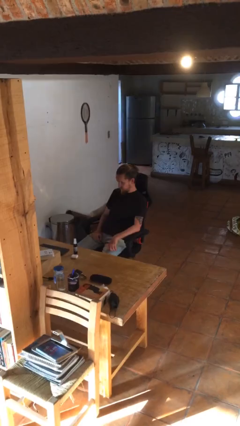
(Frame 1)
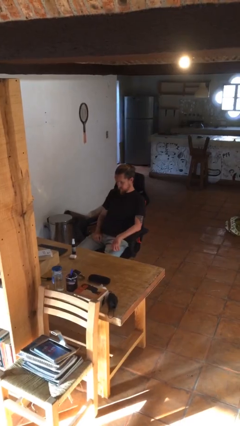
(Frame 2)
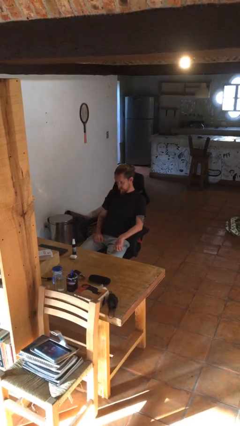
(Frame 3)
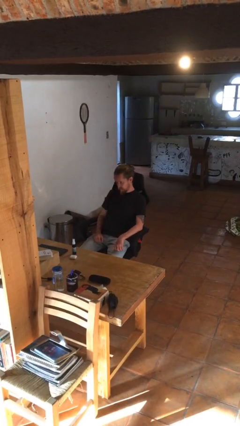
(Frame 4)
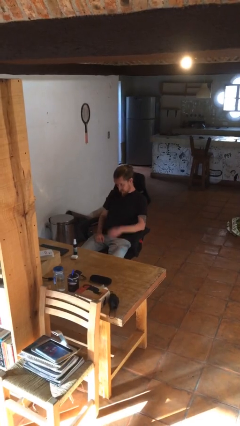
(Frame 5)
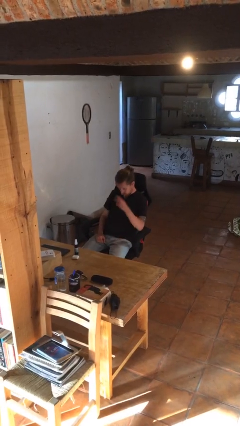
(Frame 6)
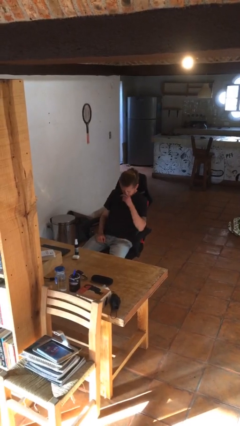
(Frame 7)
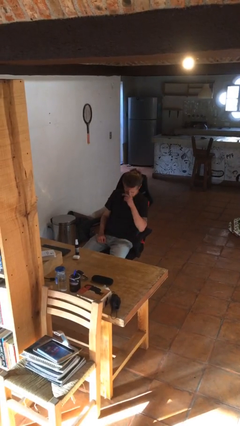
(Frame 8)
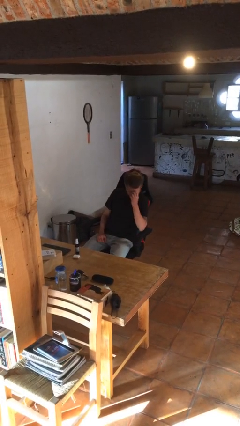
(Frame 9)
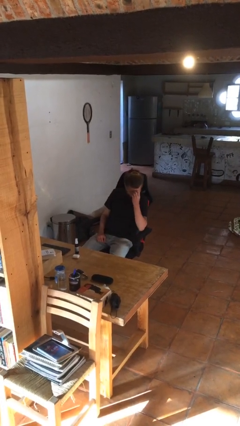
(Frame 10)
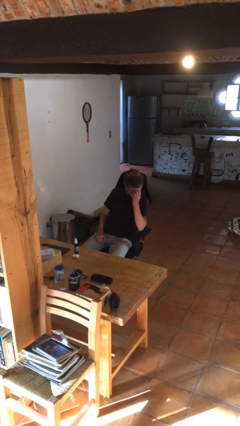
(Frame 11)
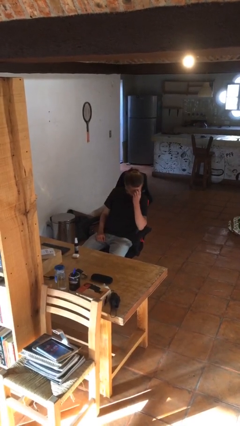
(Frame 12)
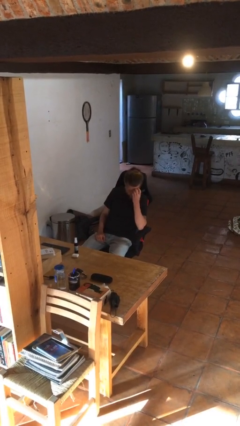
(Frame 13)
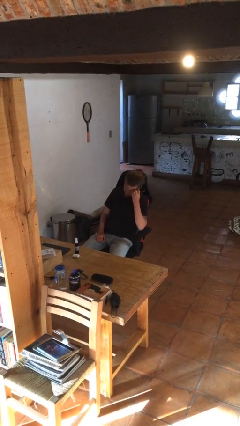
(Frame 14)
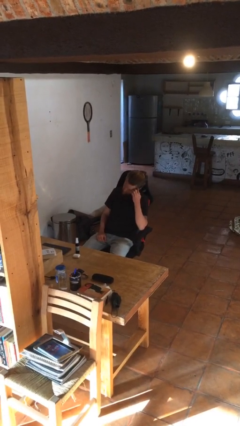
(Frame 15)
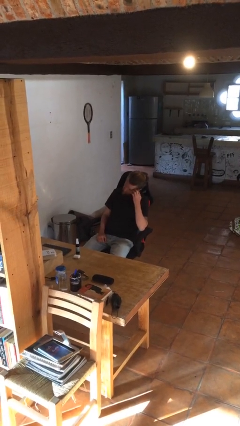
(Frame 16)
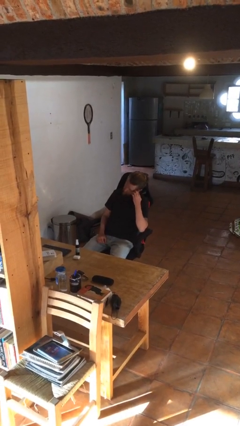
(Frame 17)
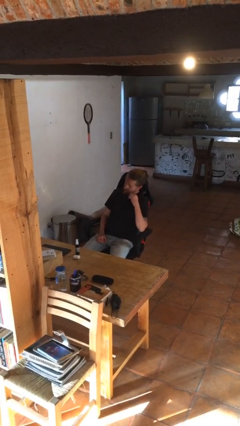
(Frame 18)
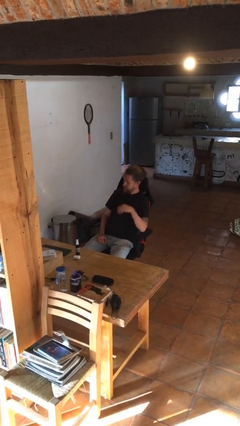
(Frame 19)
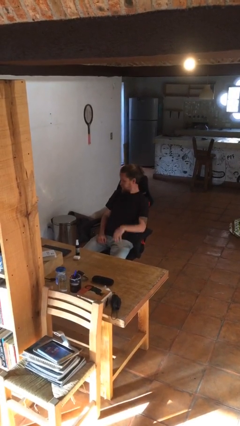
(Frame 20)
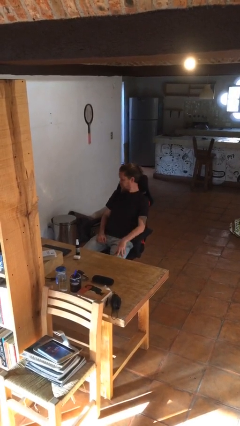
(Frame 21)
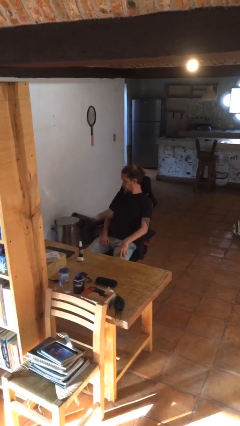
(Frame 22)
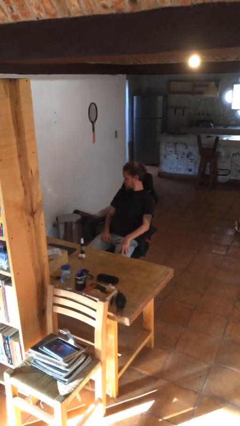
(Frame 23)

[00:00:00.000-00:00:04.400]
person scratches face

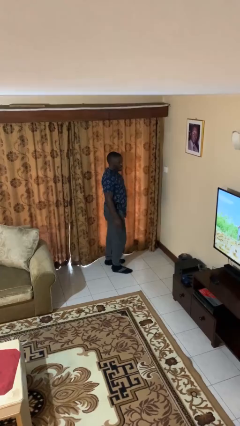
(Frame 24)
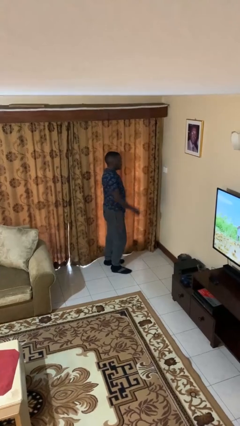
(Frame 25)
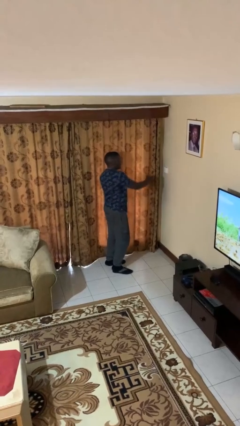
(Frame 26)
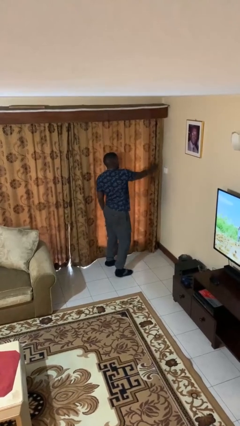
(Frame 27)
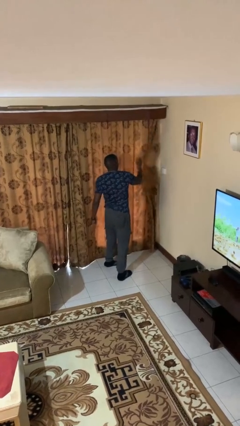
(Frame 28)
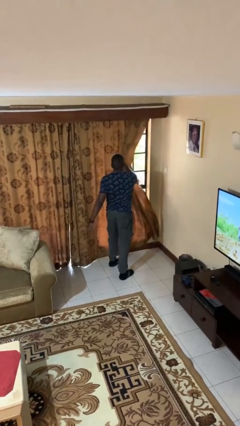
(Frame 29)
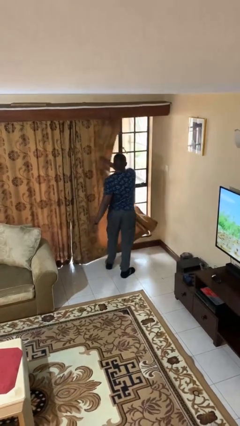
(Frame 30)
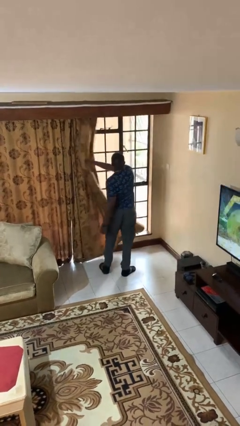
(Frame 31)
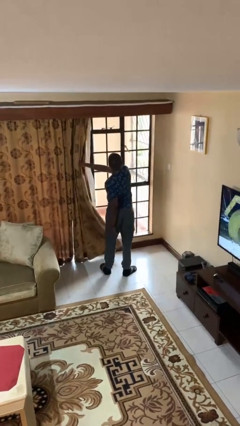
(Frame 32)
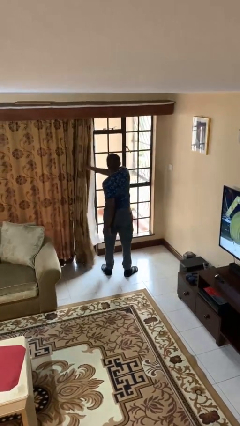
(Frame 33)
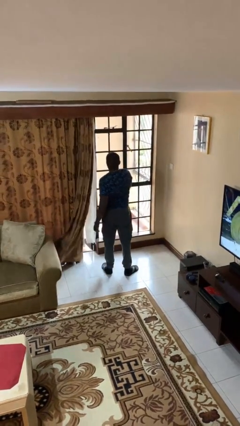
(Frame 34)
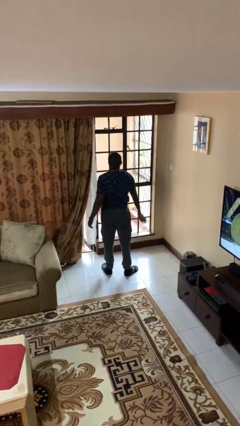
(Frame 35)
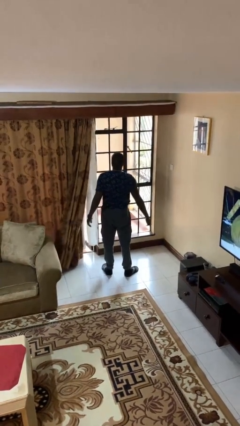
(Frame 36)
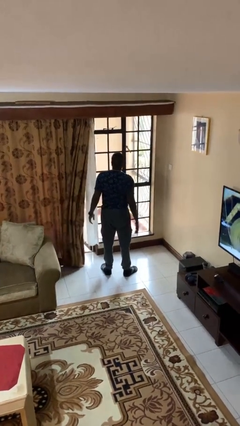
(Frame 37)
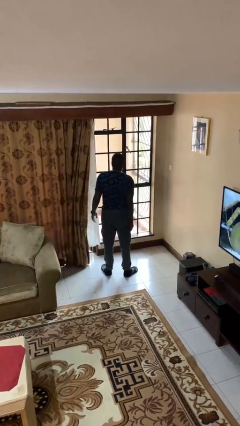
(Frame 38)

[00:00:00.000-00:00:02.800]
person opens curtains

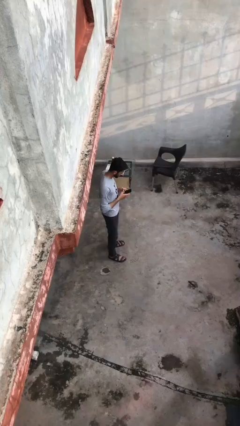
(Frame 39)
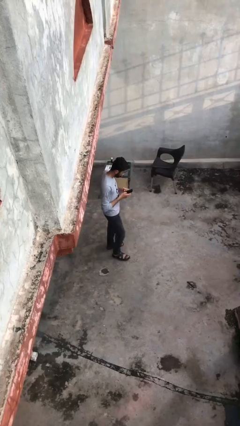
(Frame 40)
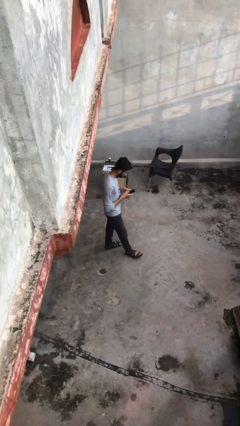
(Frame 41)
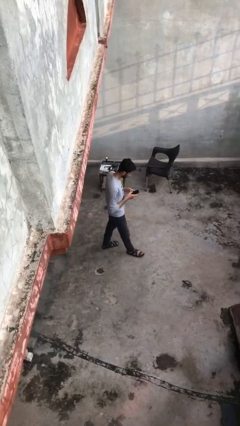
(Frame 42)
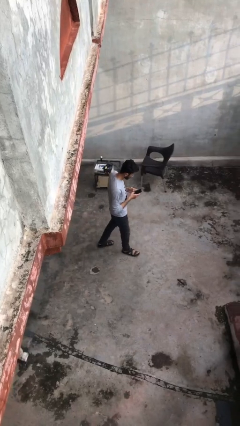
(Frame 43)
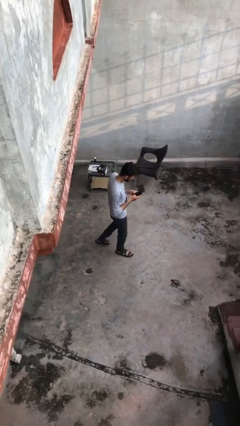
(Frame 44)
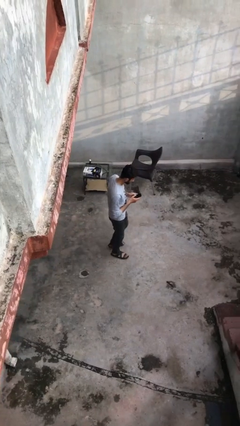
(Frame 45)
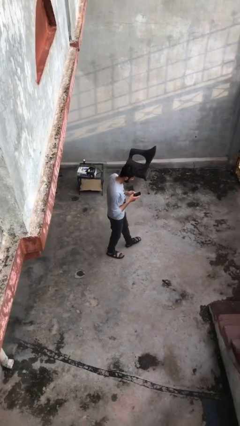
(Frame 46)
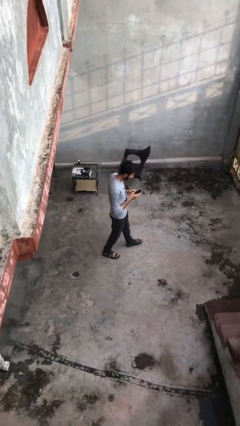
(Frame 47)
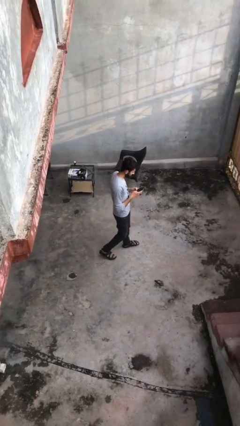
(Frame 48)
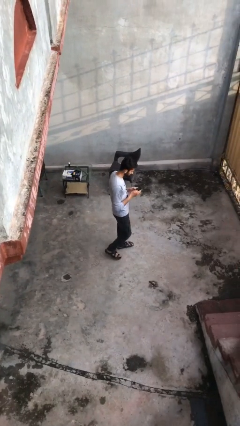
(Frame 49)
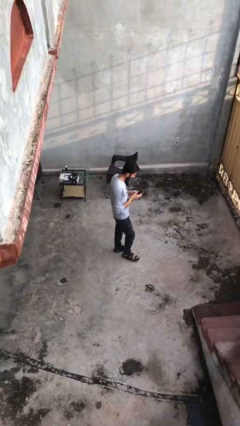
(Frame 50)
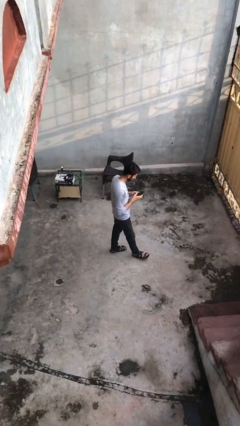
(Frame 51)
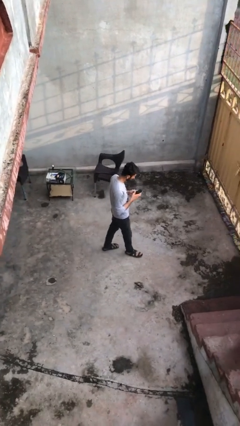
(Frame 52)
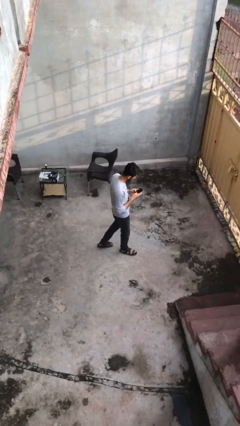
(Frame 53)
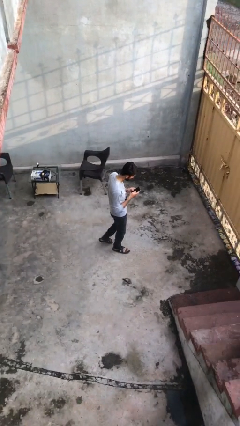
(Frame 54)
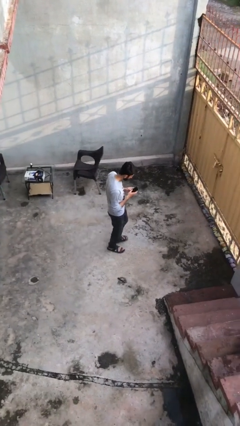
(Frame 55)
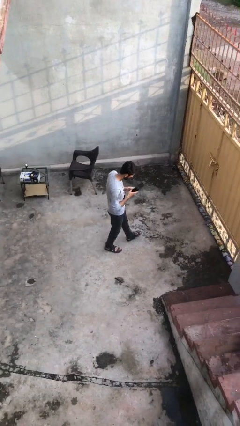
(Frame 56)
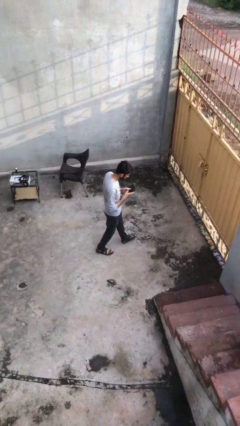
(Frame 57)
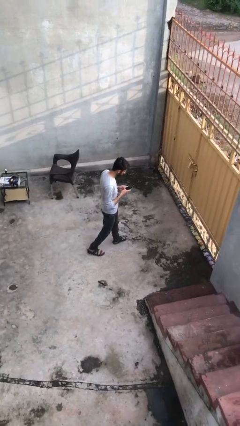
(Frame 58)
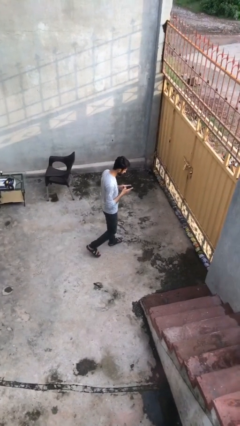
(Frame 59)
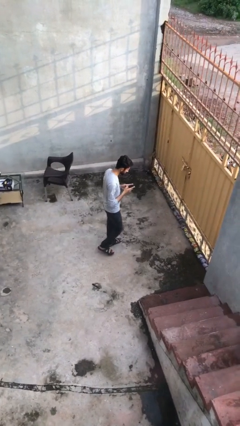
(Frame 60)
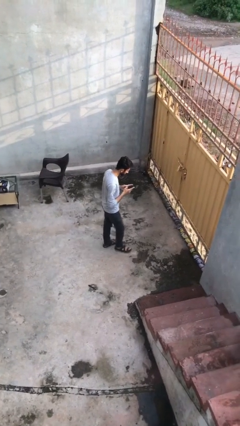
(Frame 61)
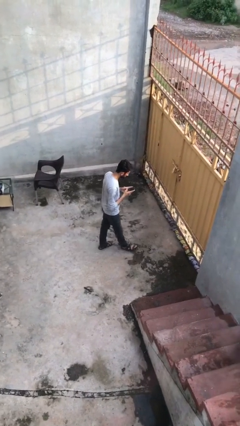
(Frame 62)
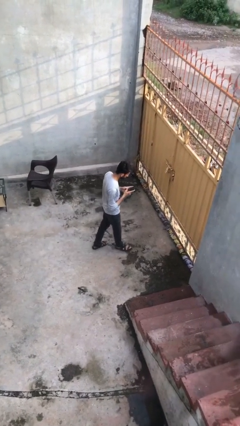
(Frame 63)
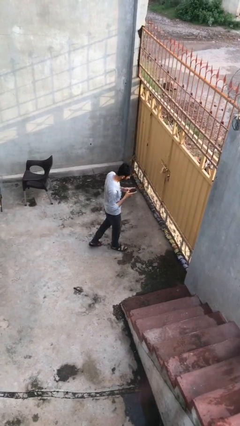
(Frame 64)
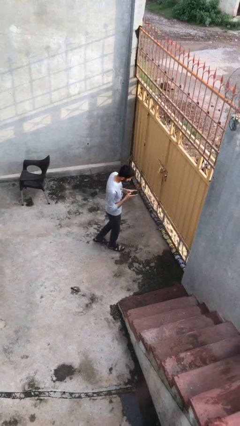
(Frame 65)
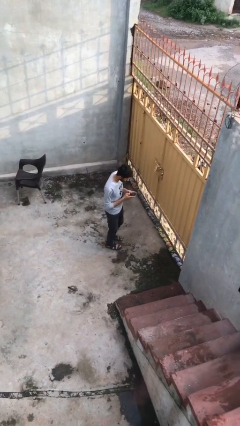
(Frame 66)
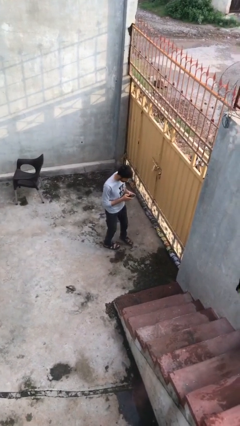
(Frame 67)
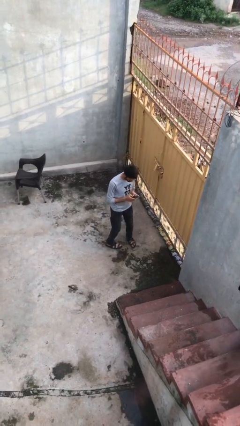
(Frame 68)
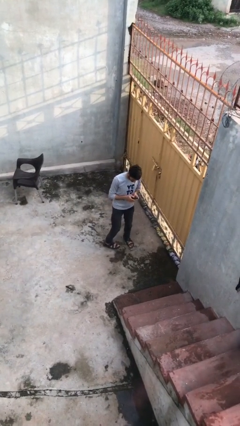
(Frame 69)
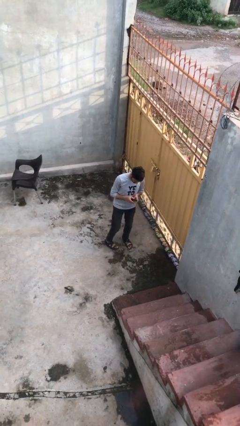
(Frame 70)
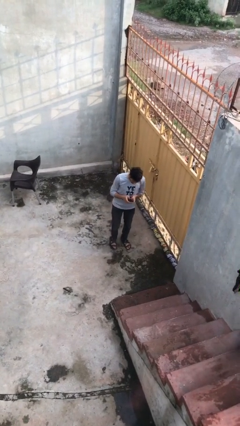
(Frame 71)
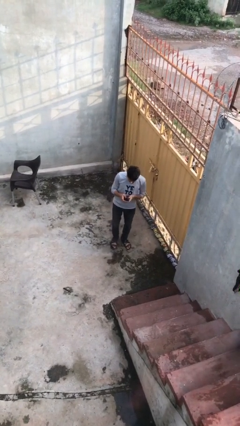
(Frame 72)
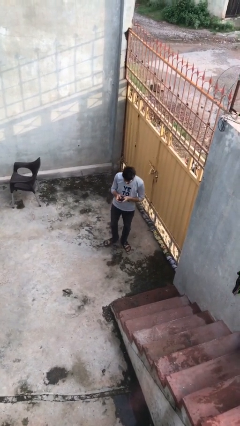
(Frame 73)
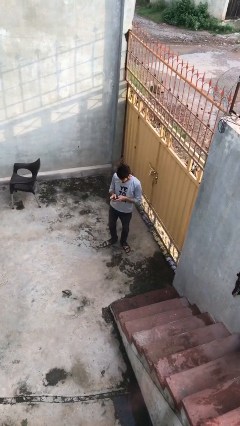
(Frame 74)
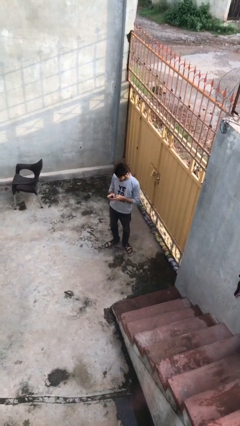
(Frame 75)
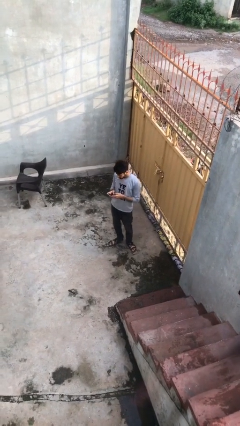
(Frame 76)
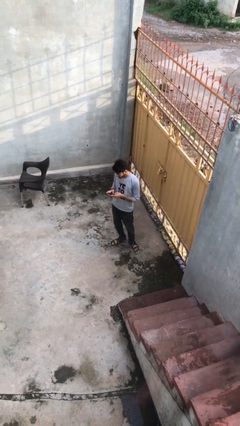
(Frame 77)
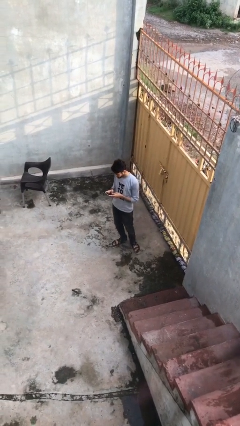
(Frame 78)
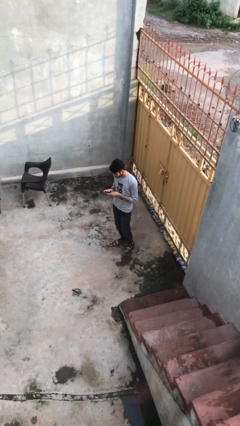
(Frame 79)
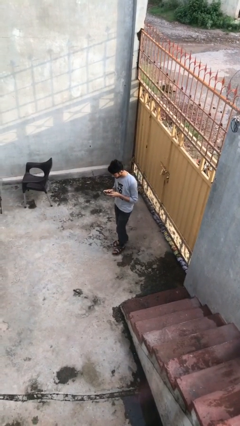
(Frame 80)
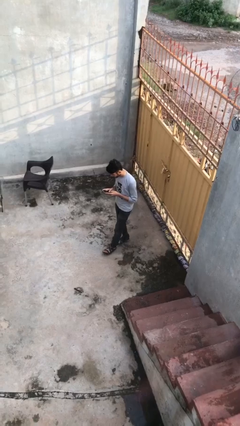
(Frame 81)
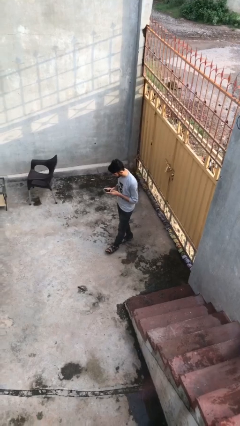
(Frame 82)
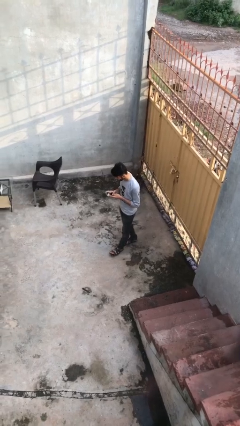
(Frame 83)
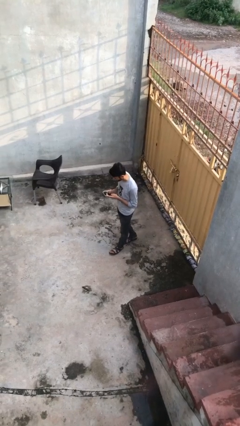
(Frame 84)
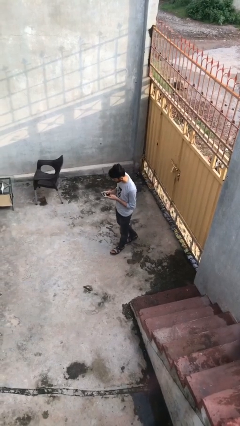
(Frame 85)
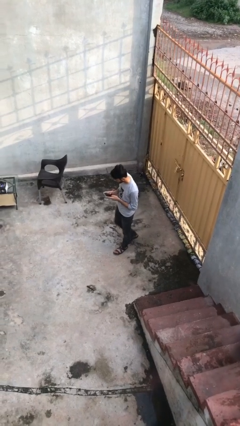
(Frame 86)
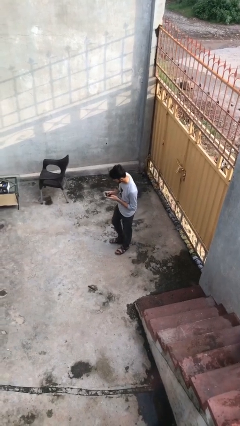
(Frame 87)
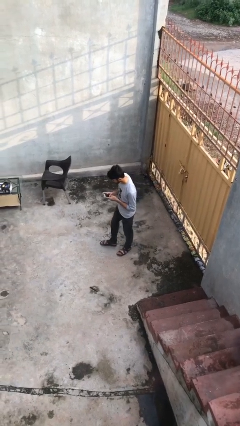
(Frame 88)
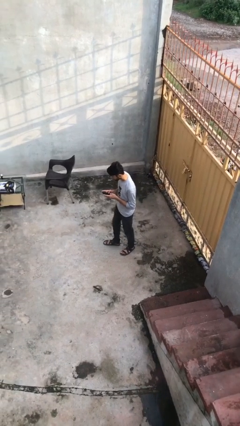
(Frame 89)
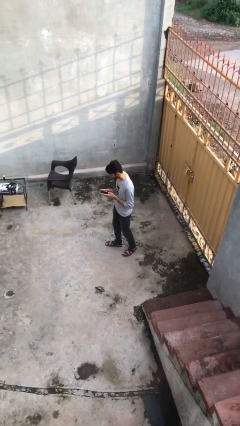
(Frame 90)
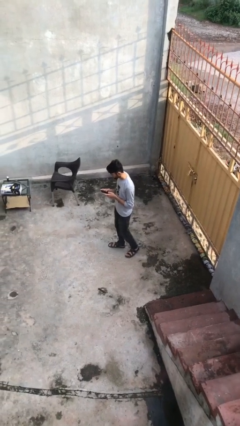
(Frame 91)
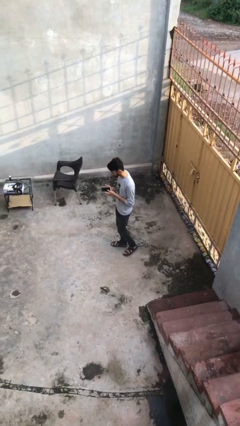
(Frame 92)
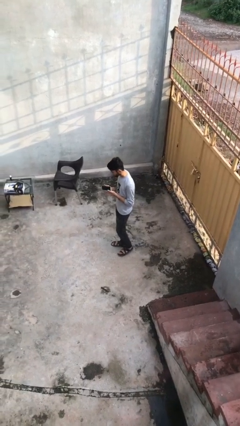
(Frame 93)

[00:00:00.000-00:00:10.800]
person texts on phone
